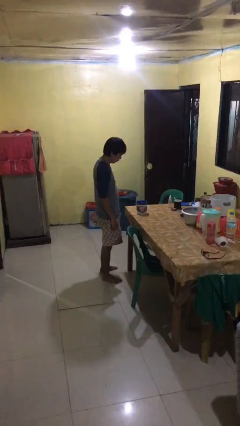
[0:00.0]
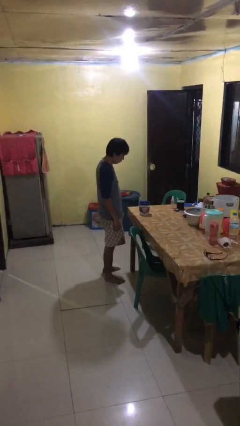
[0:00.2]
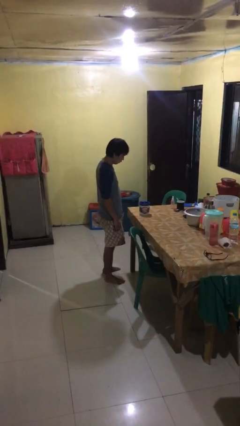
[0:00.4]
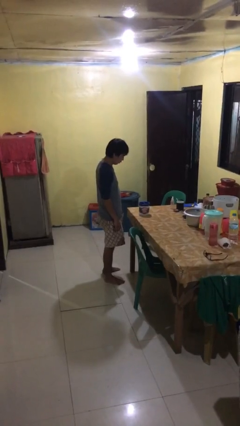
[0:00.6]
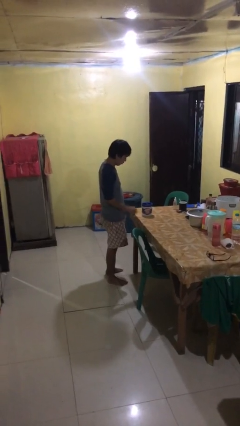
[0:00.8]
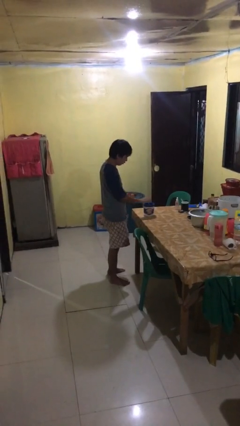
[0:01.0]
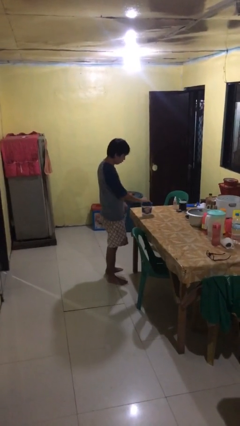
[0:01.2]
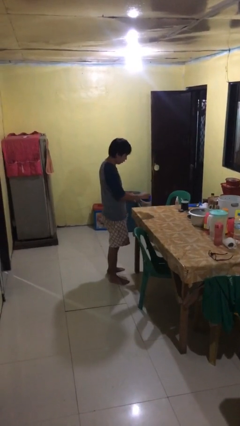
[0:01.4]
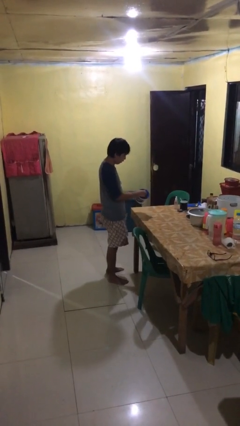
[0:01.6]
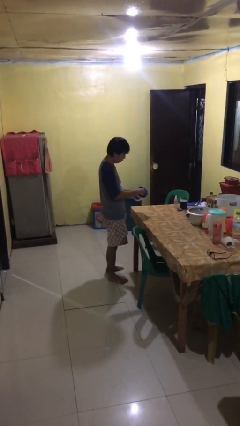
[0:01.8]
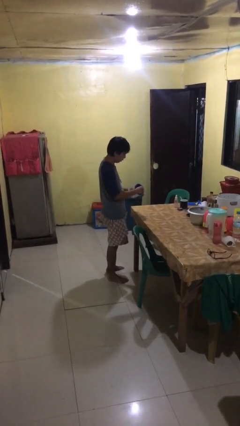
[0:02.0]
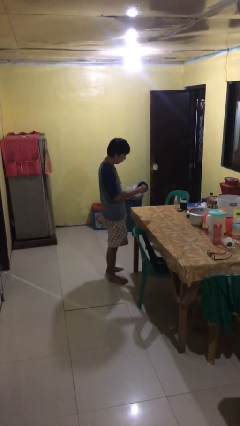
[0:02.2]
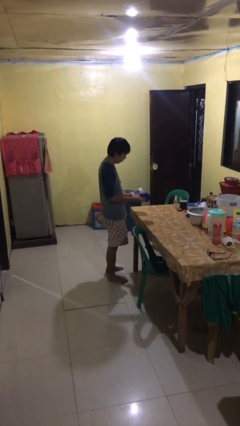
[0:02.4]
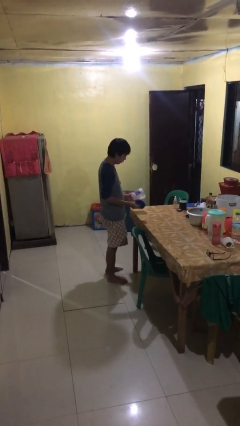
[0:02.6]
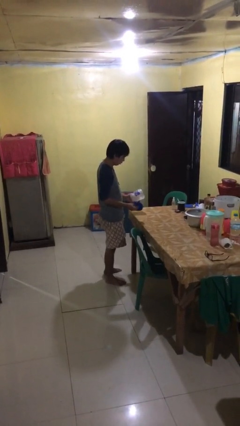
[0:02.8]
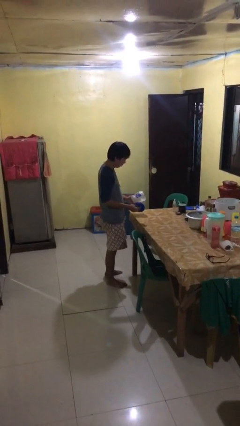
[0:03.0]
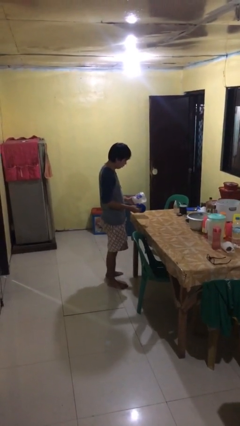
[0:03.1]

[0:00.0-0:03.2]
person opens jar

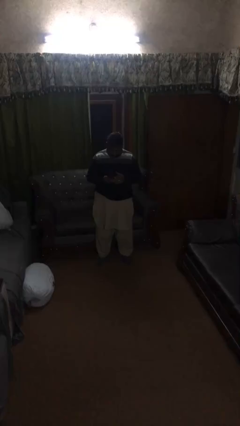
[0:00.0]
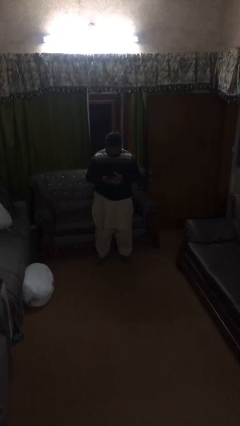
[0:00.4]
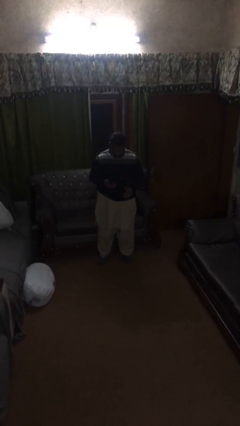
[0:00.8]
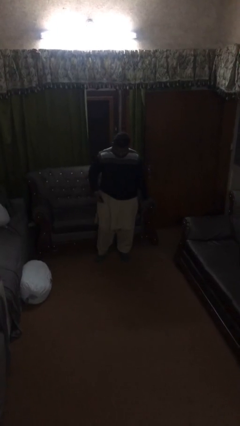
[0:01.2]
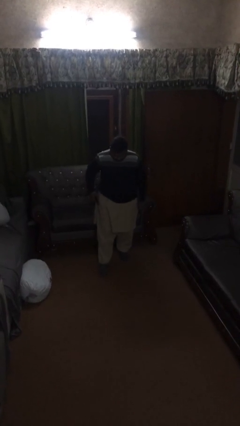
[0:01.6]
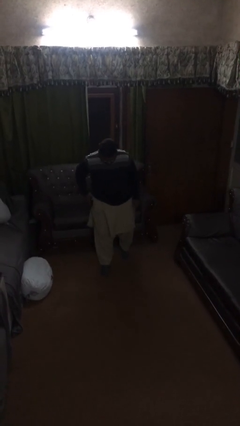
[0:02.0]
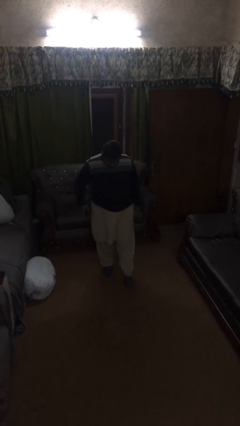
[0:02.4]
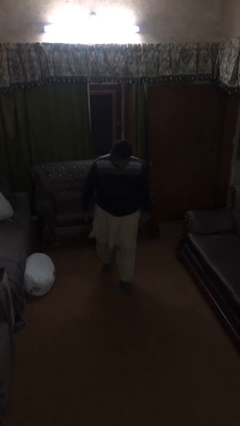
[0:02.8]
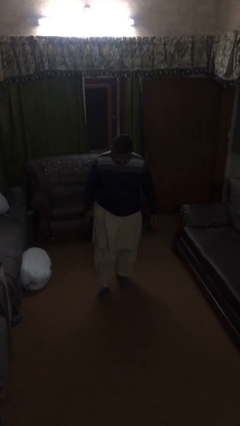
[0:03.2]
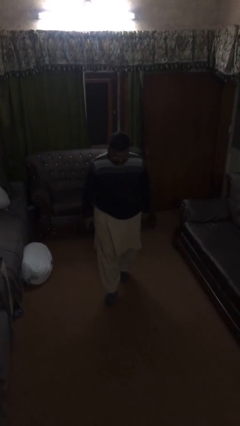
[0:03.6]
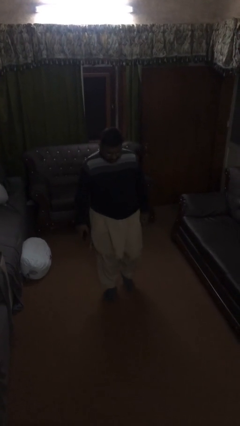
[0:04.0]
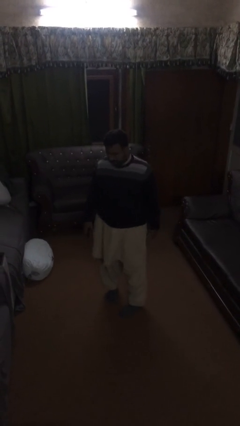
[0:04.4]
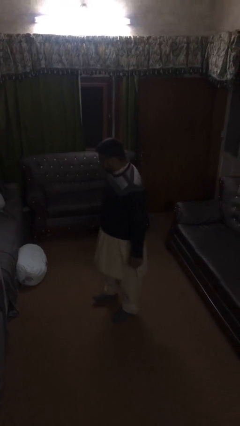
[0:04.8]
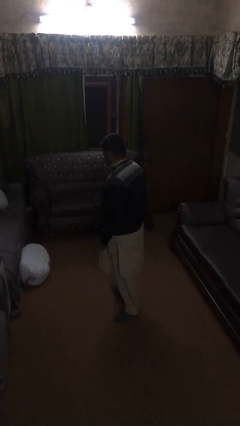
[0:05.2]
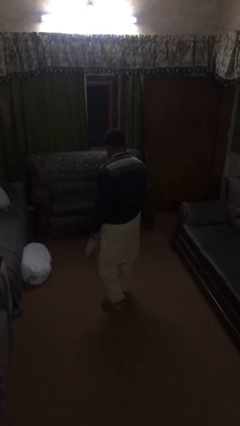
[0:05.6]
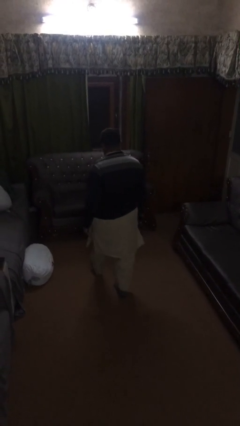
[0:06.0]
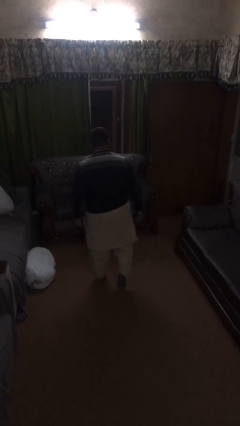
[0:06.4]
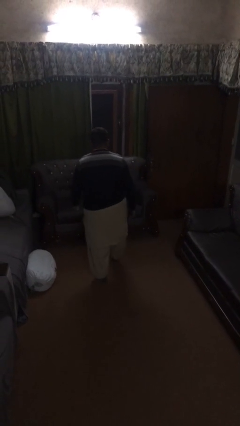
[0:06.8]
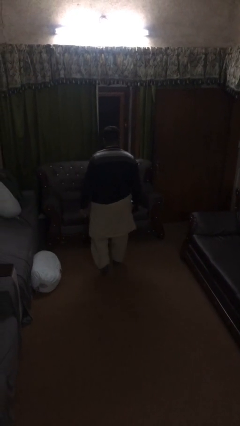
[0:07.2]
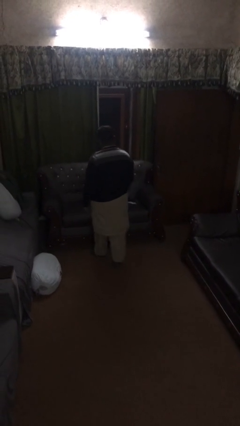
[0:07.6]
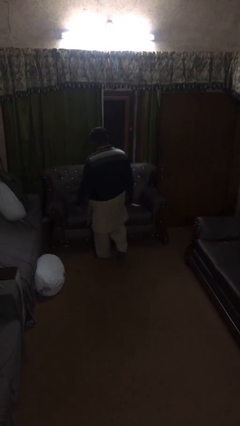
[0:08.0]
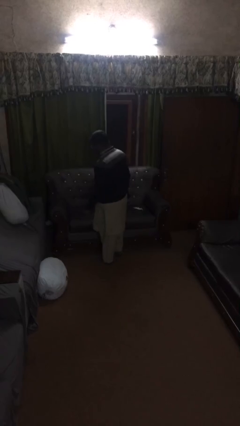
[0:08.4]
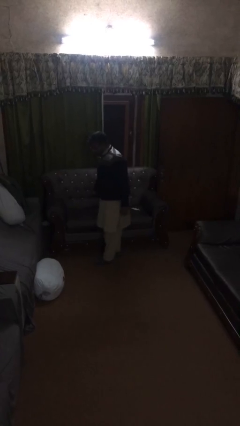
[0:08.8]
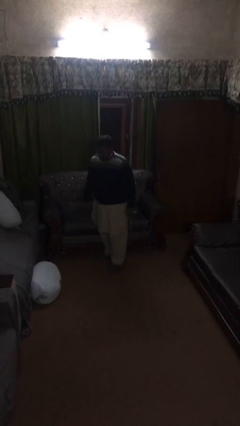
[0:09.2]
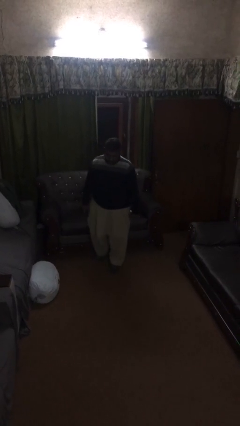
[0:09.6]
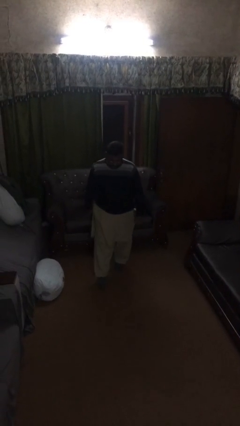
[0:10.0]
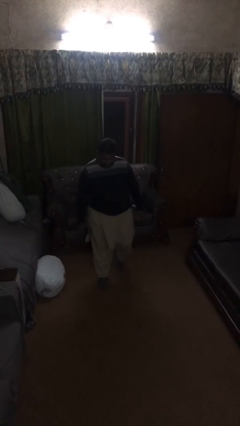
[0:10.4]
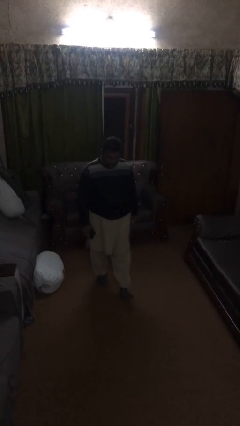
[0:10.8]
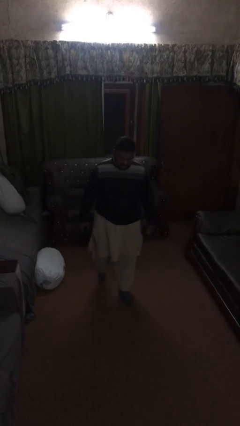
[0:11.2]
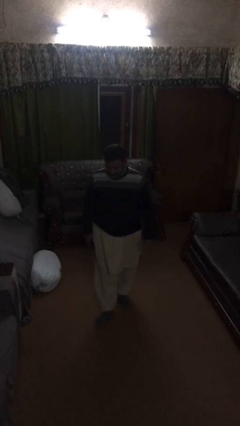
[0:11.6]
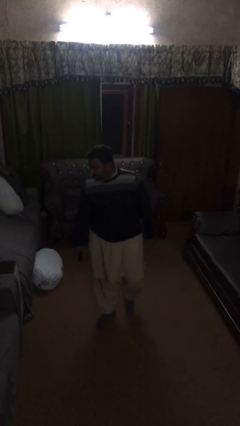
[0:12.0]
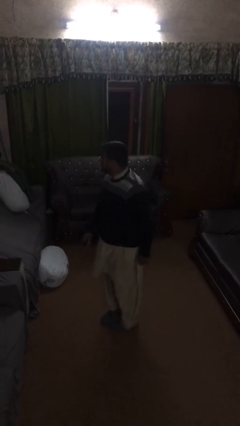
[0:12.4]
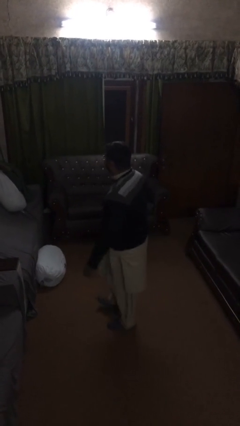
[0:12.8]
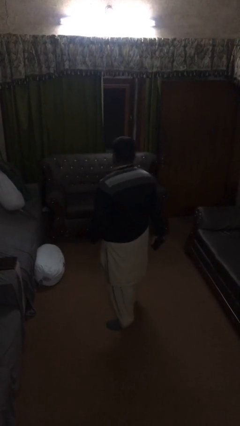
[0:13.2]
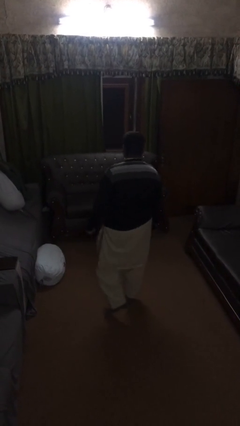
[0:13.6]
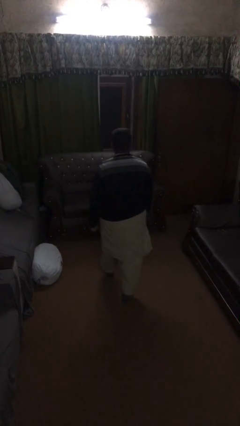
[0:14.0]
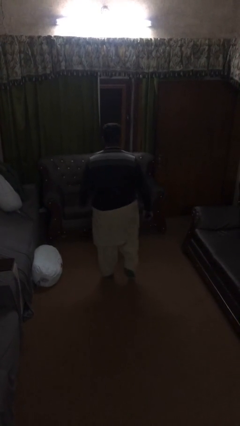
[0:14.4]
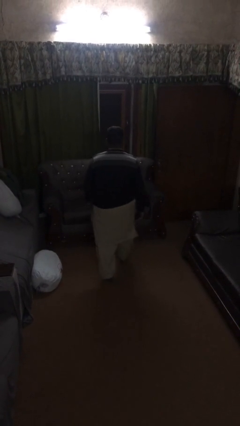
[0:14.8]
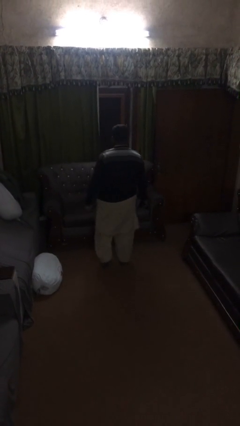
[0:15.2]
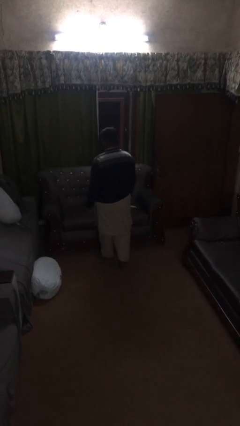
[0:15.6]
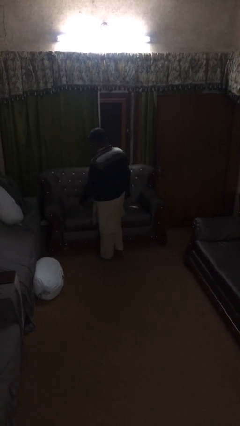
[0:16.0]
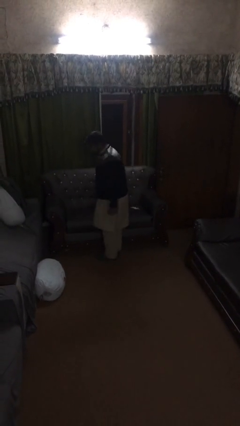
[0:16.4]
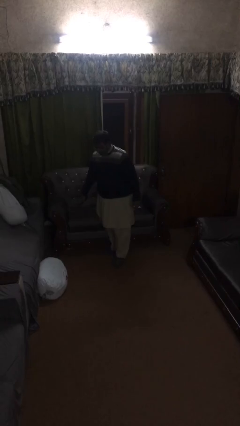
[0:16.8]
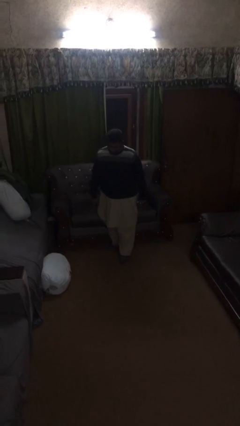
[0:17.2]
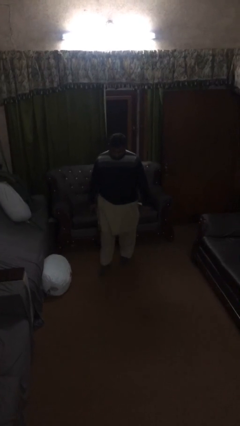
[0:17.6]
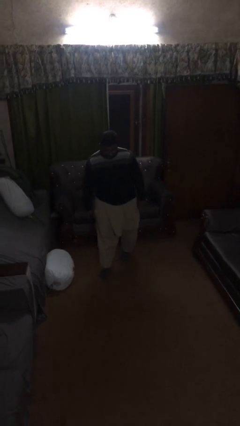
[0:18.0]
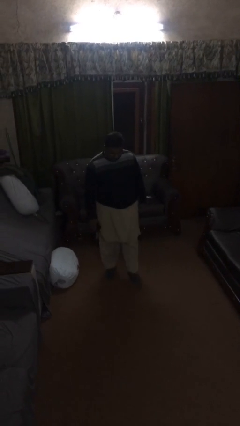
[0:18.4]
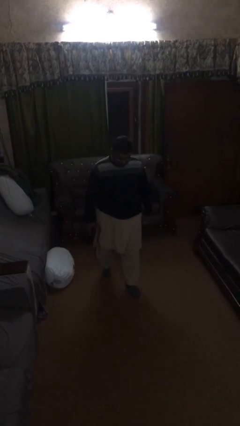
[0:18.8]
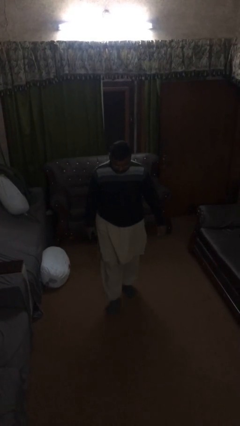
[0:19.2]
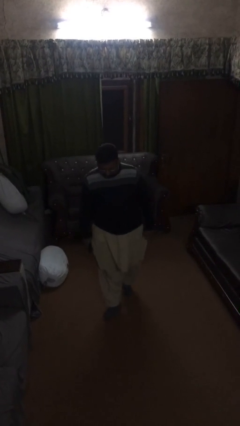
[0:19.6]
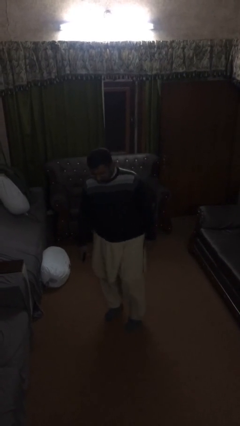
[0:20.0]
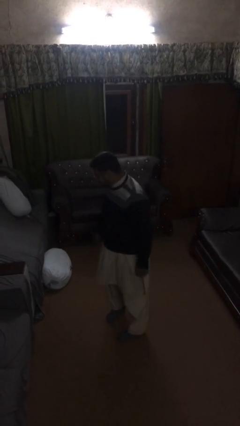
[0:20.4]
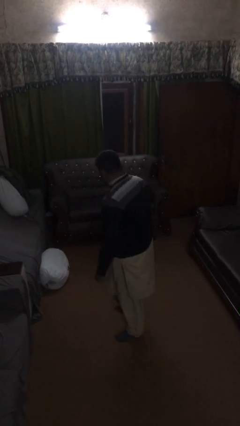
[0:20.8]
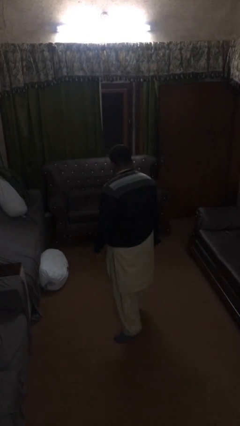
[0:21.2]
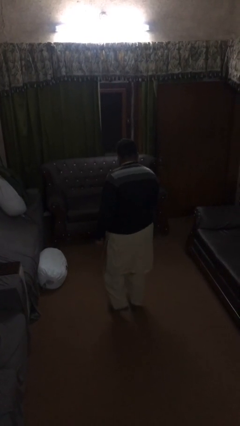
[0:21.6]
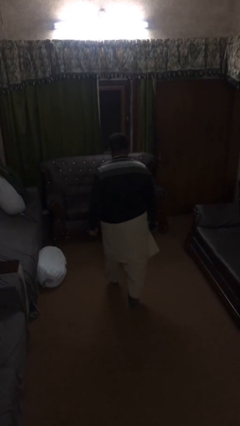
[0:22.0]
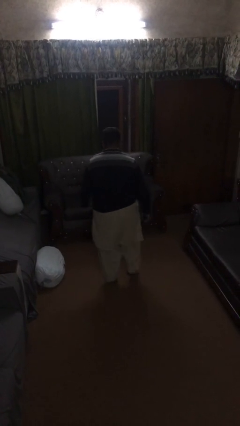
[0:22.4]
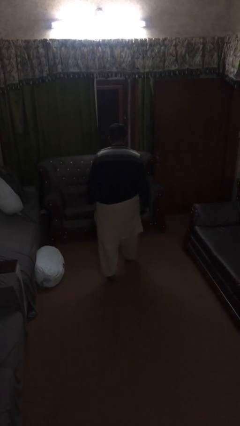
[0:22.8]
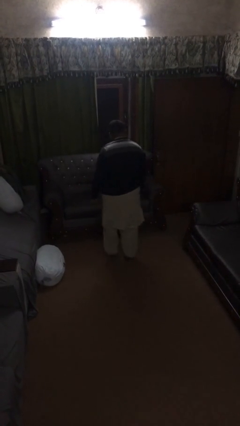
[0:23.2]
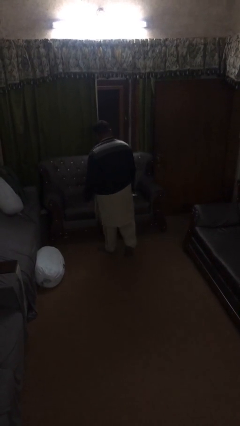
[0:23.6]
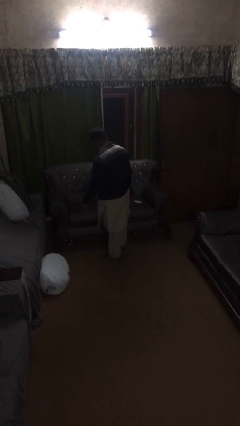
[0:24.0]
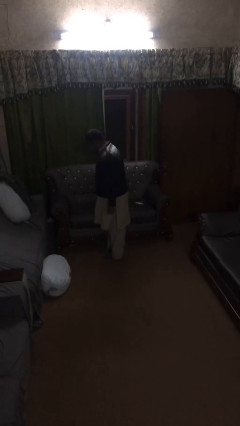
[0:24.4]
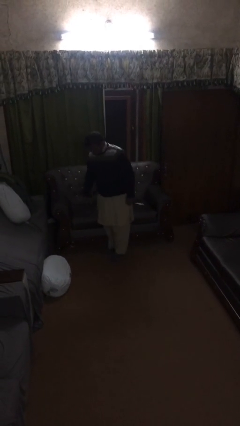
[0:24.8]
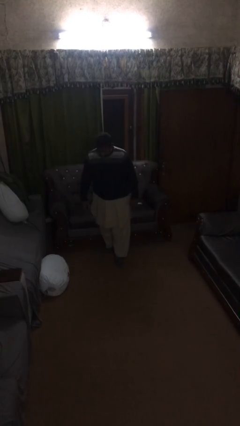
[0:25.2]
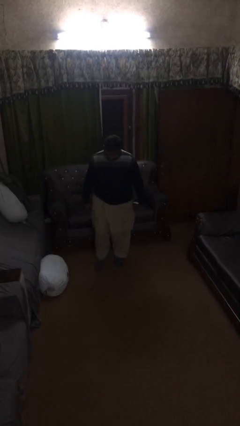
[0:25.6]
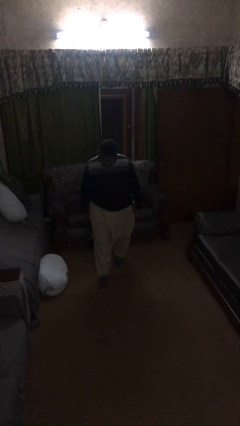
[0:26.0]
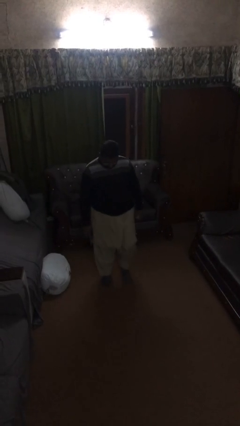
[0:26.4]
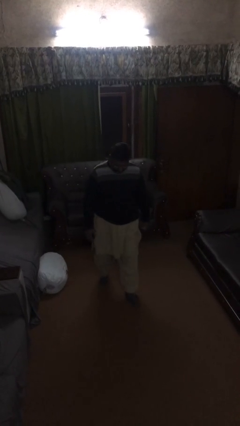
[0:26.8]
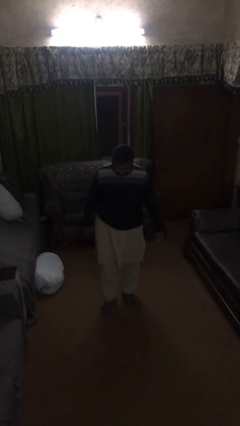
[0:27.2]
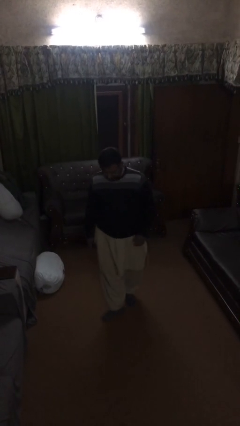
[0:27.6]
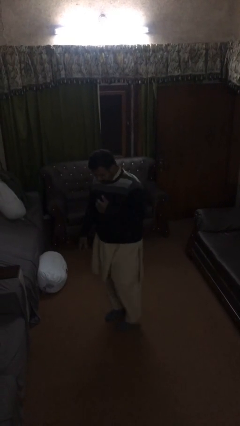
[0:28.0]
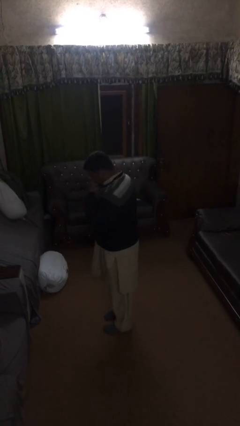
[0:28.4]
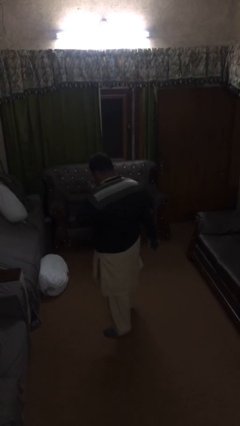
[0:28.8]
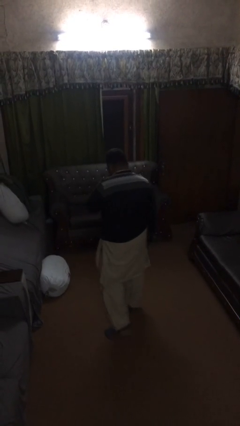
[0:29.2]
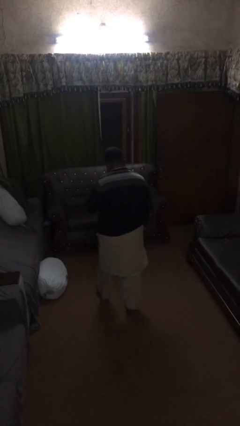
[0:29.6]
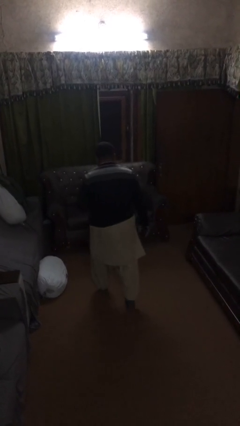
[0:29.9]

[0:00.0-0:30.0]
person walks
